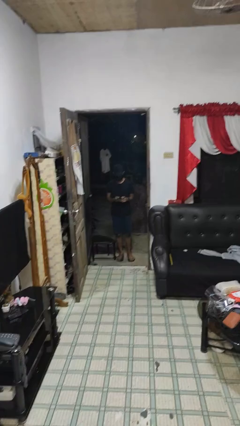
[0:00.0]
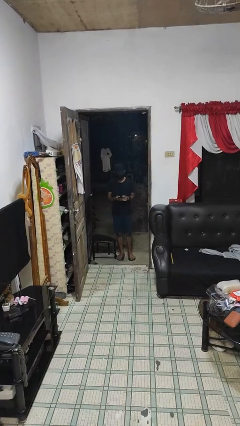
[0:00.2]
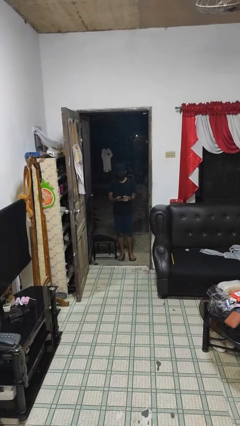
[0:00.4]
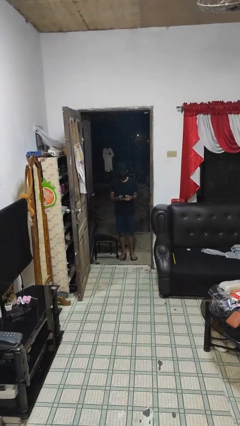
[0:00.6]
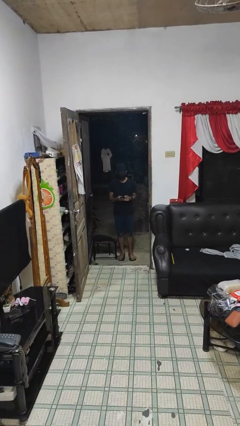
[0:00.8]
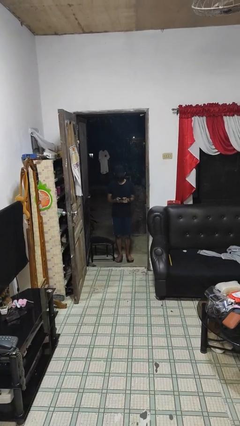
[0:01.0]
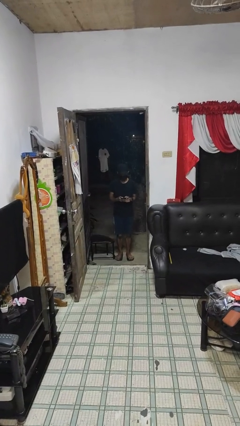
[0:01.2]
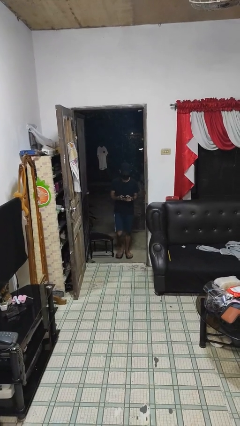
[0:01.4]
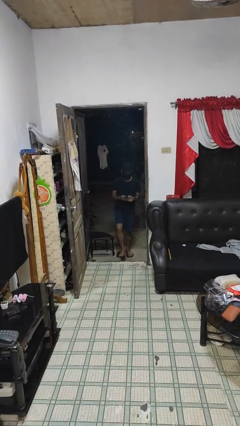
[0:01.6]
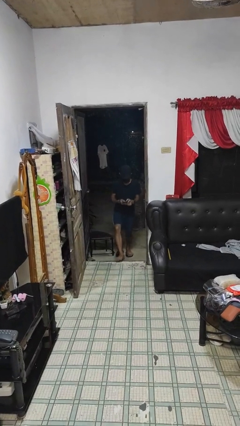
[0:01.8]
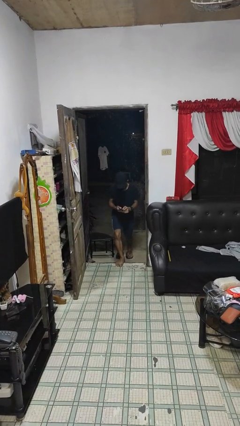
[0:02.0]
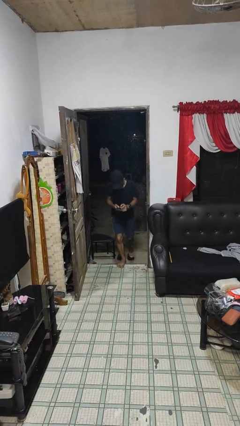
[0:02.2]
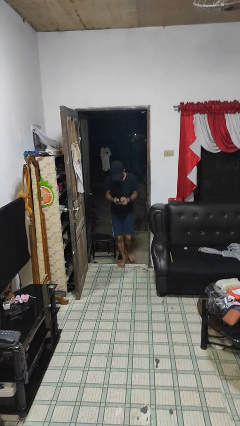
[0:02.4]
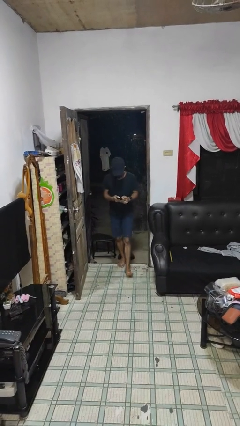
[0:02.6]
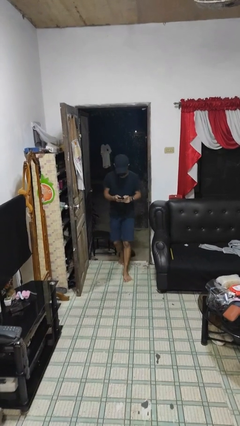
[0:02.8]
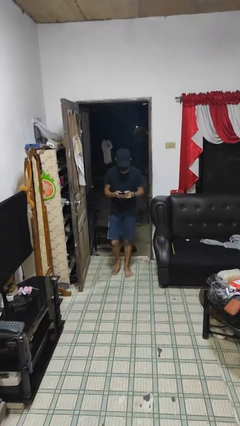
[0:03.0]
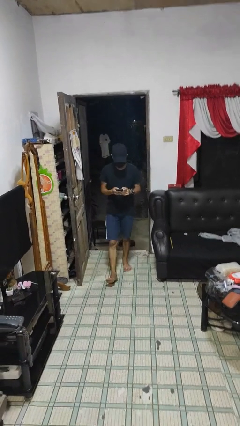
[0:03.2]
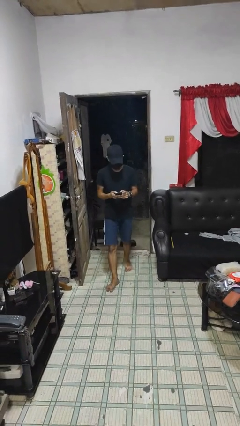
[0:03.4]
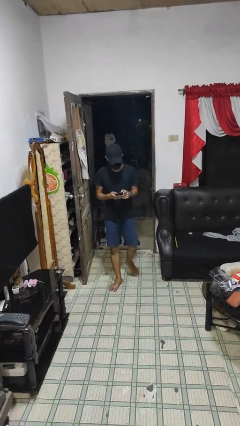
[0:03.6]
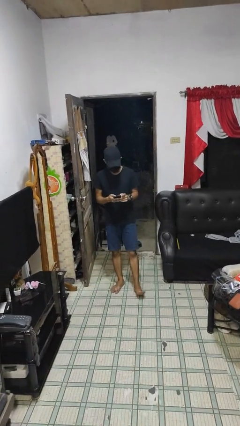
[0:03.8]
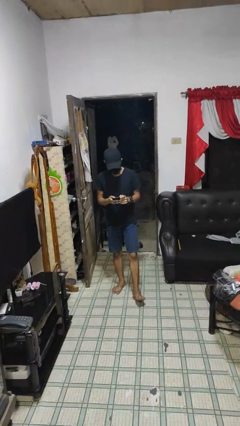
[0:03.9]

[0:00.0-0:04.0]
person enters scene through structure

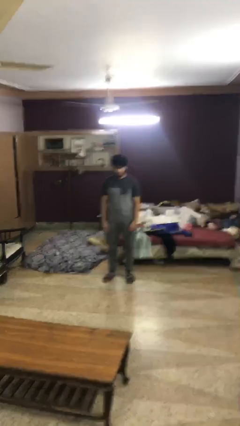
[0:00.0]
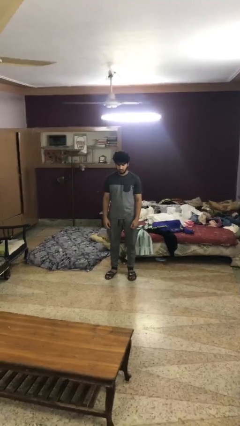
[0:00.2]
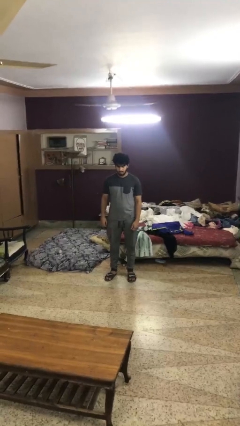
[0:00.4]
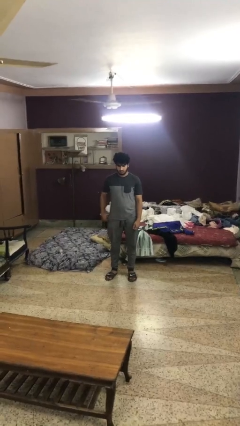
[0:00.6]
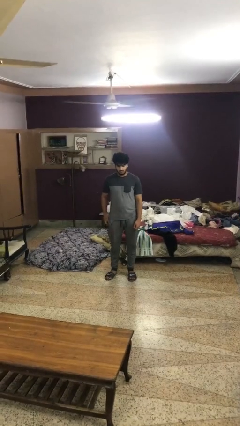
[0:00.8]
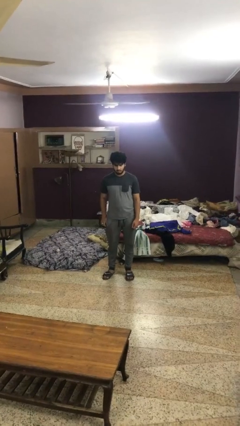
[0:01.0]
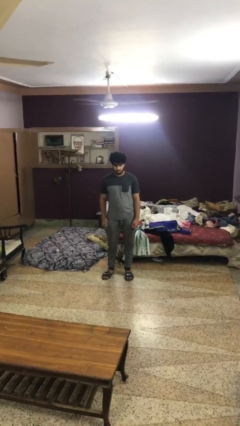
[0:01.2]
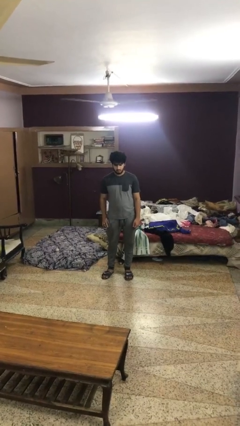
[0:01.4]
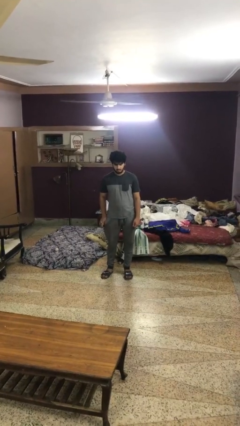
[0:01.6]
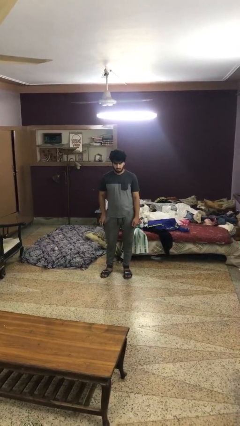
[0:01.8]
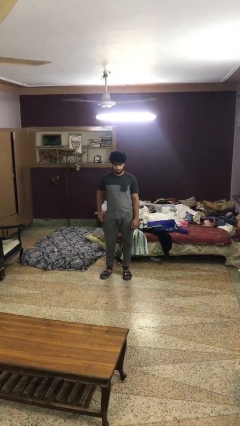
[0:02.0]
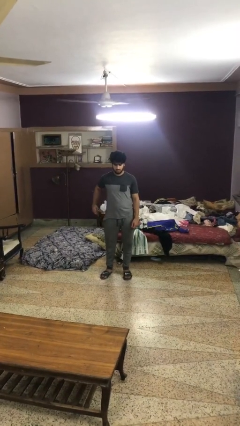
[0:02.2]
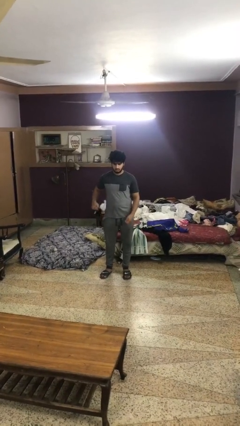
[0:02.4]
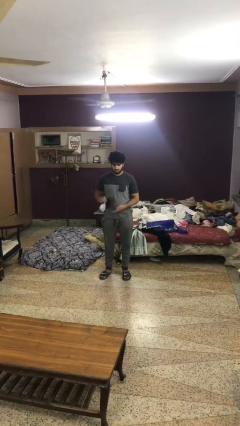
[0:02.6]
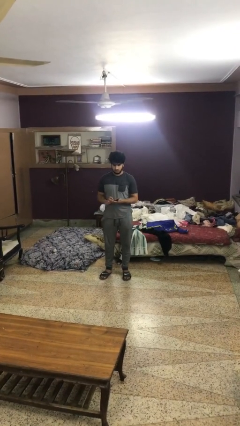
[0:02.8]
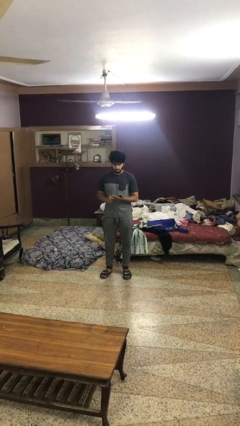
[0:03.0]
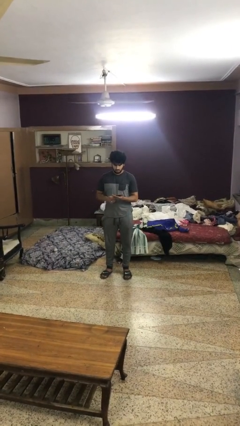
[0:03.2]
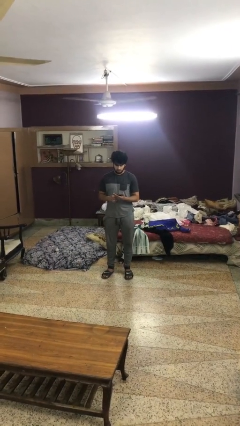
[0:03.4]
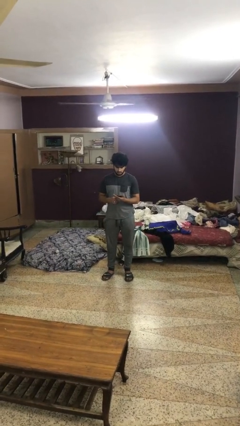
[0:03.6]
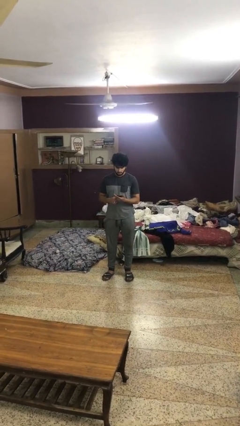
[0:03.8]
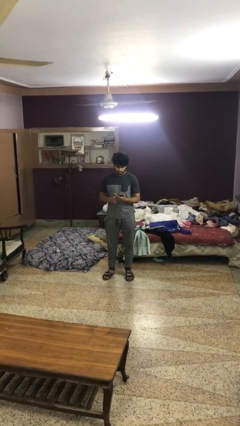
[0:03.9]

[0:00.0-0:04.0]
person takes phone from pocket

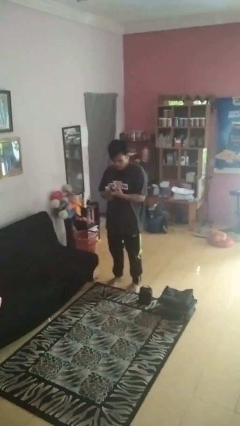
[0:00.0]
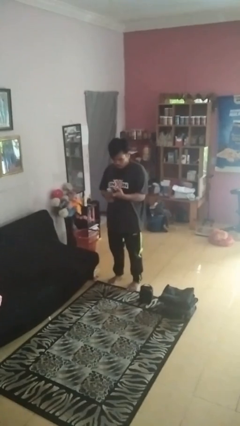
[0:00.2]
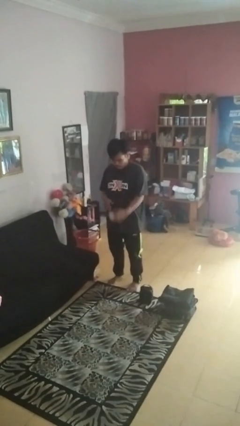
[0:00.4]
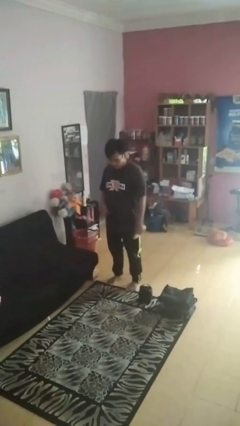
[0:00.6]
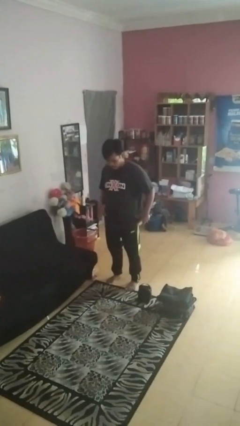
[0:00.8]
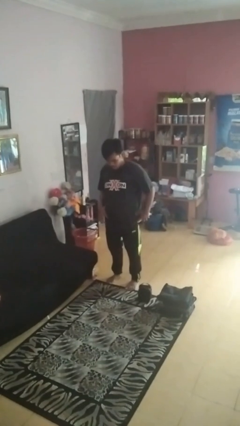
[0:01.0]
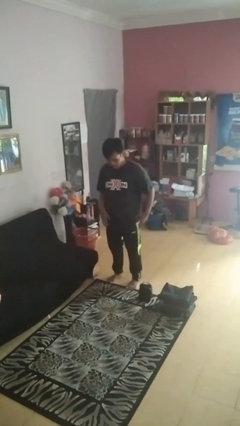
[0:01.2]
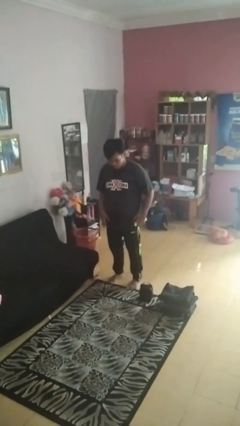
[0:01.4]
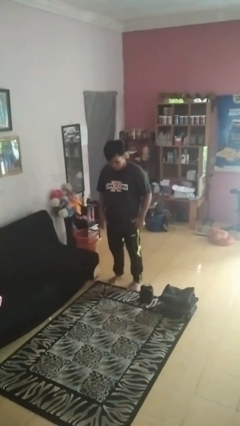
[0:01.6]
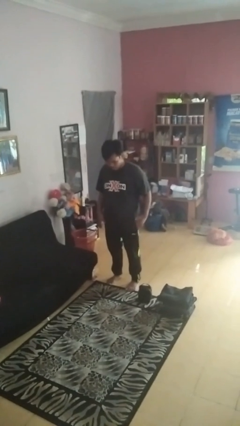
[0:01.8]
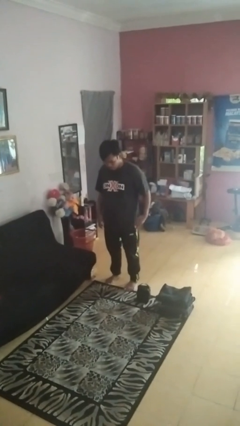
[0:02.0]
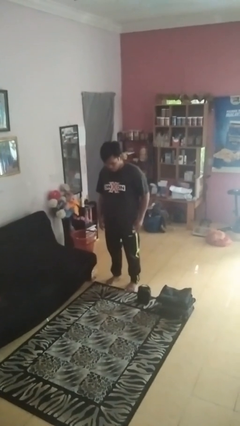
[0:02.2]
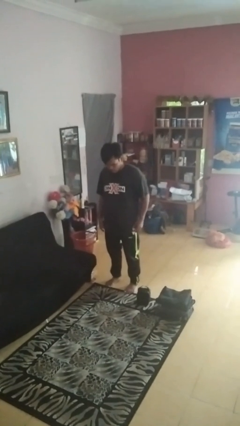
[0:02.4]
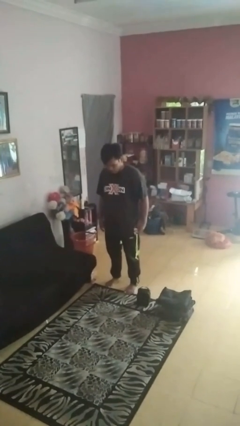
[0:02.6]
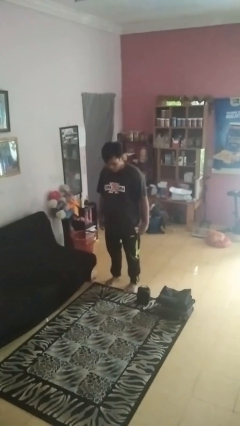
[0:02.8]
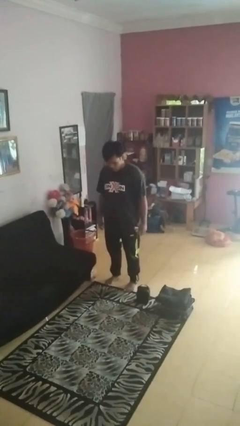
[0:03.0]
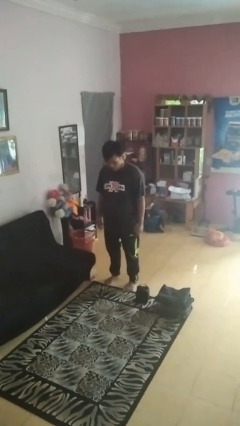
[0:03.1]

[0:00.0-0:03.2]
person puts phone into pocket

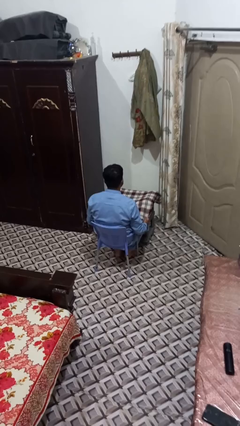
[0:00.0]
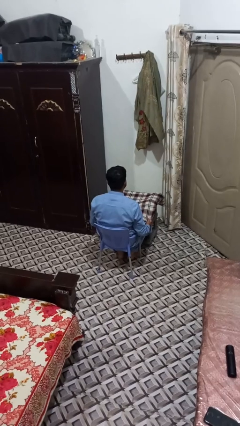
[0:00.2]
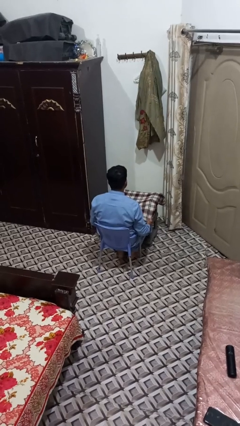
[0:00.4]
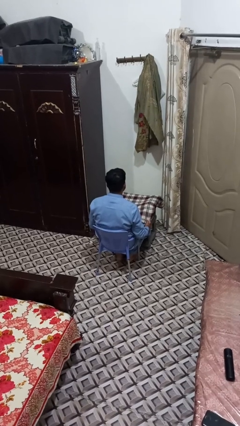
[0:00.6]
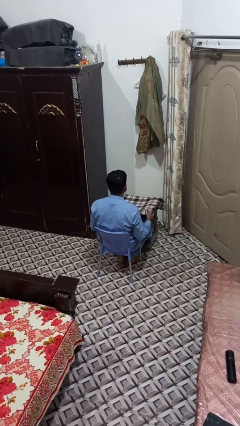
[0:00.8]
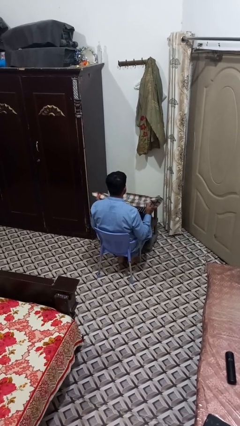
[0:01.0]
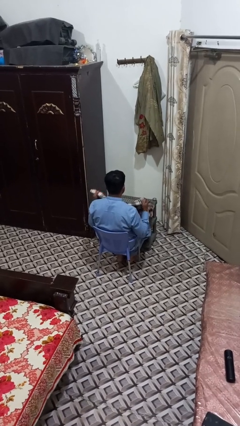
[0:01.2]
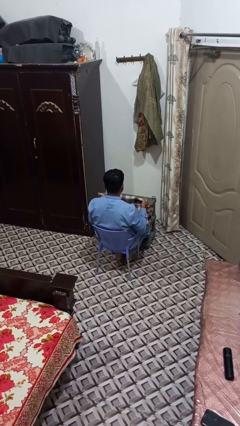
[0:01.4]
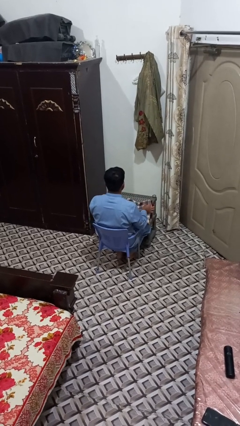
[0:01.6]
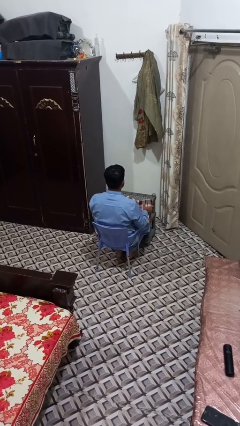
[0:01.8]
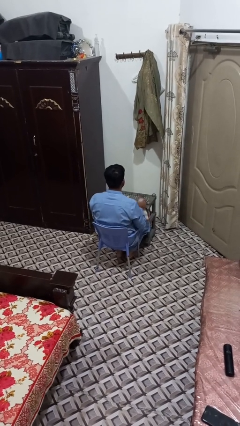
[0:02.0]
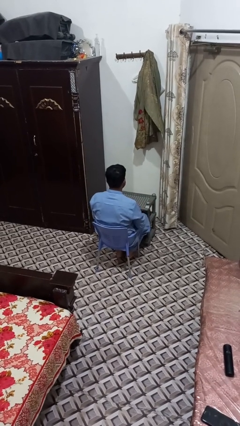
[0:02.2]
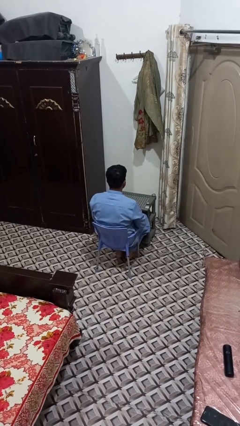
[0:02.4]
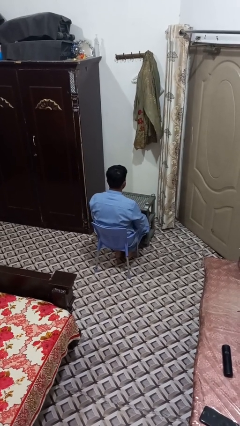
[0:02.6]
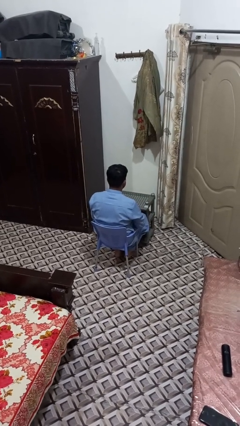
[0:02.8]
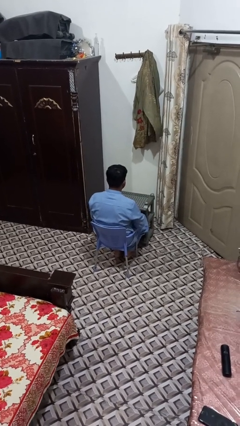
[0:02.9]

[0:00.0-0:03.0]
person folds tablecloth

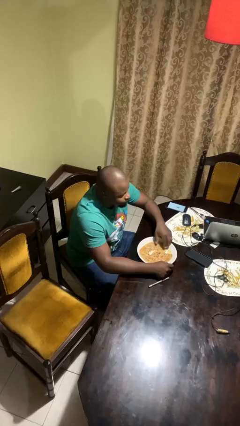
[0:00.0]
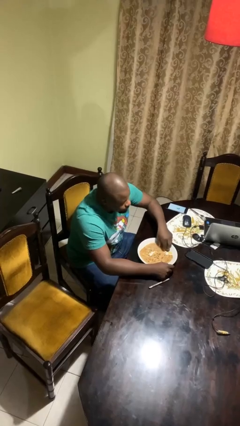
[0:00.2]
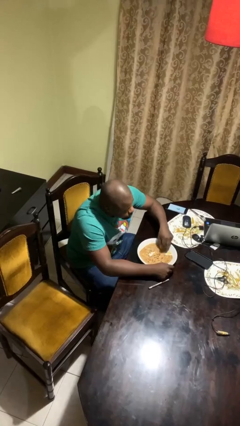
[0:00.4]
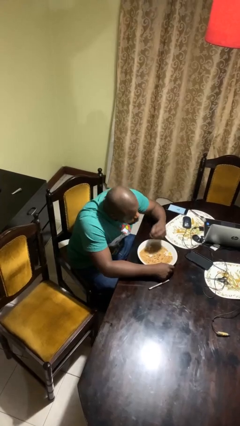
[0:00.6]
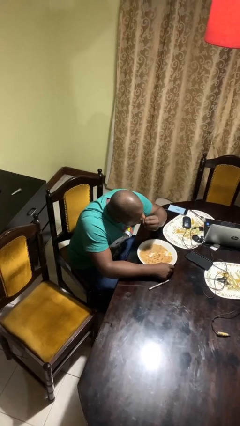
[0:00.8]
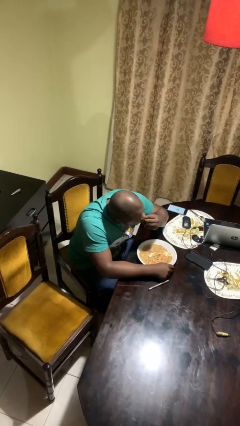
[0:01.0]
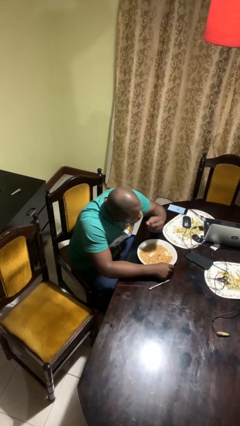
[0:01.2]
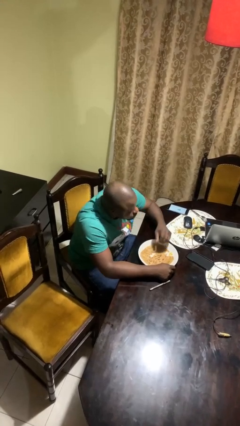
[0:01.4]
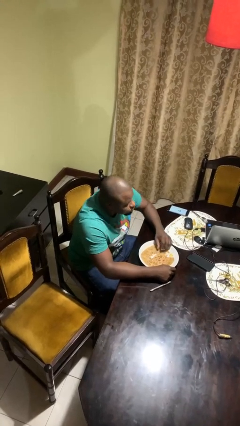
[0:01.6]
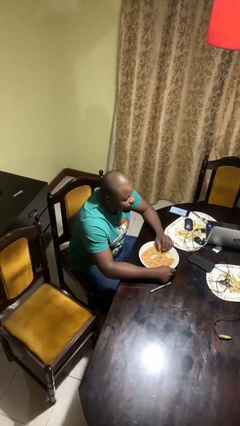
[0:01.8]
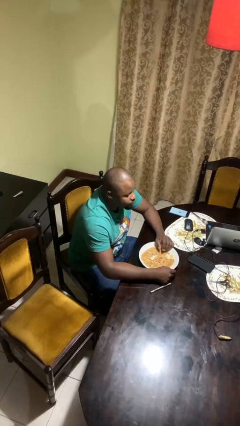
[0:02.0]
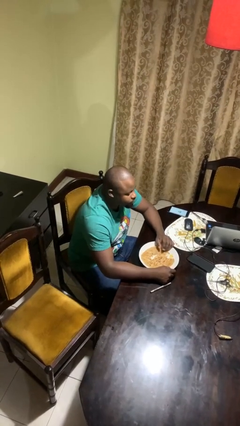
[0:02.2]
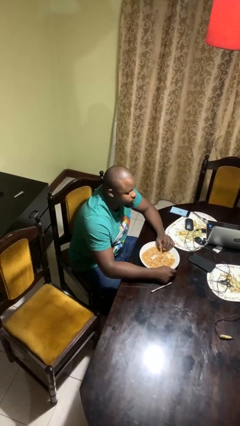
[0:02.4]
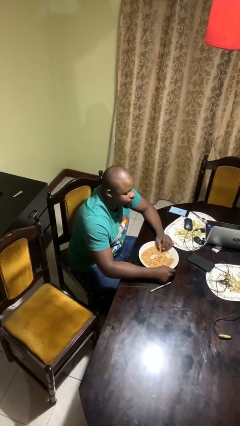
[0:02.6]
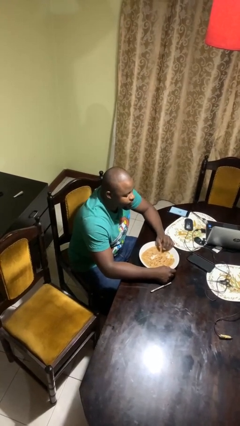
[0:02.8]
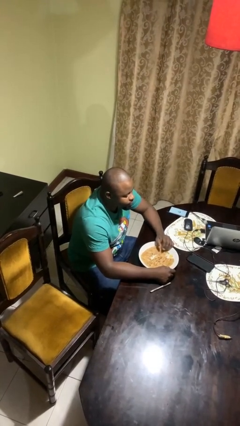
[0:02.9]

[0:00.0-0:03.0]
person eats with hands
